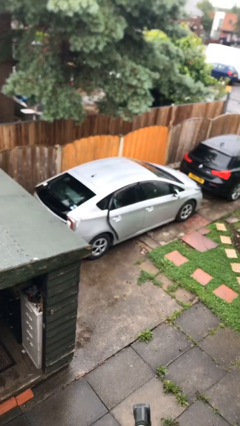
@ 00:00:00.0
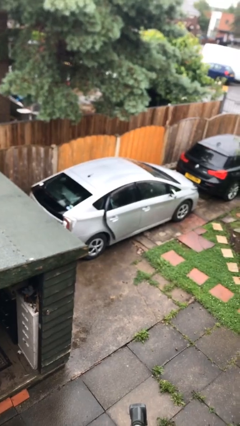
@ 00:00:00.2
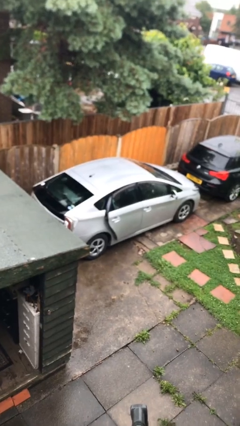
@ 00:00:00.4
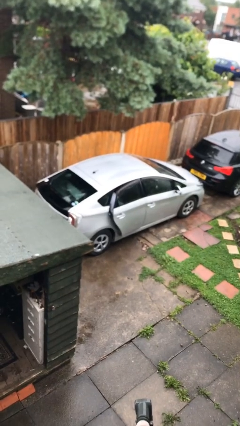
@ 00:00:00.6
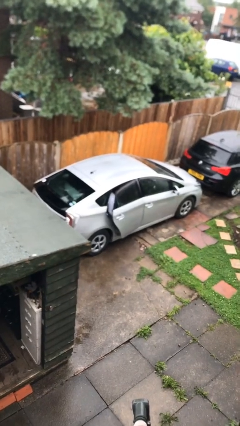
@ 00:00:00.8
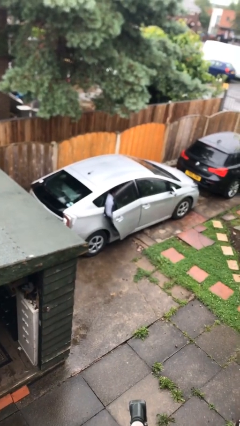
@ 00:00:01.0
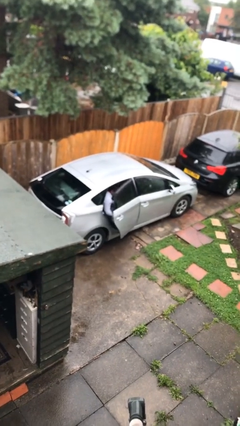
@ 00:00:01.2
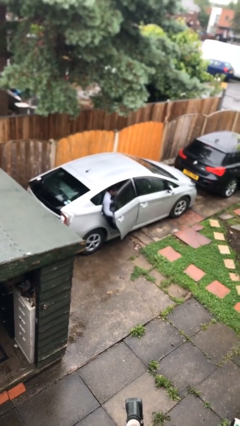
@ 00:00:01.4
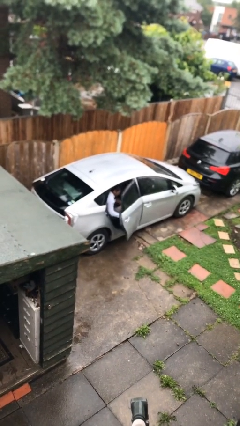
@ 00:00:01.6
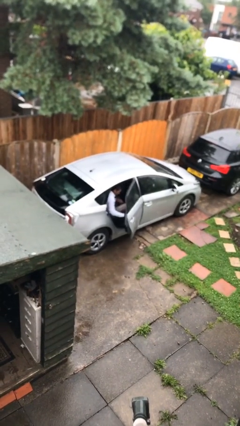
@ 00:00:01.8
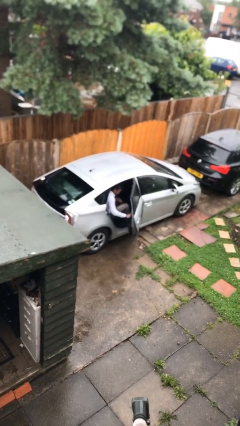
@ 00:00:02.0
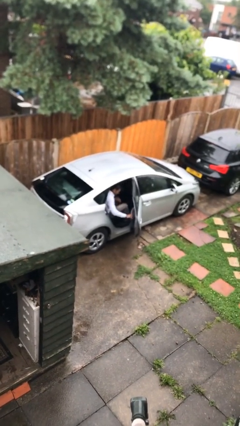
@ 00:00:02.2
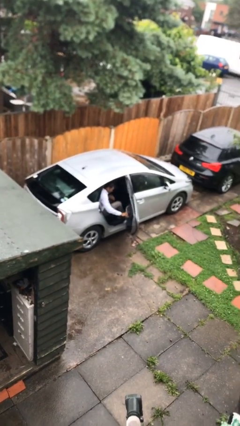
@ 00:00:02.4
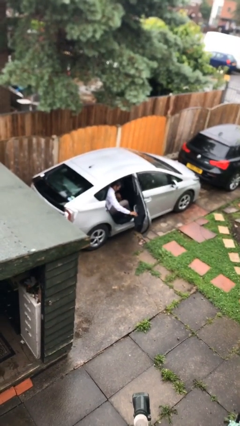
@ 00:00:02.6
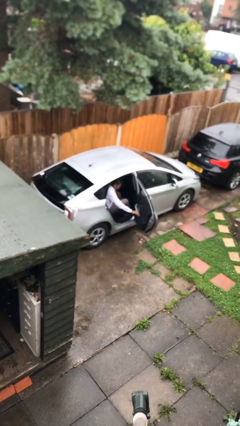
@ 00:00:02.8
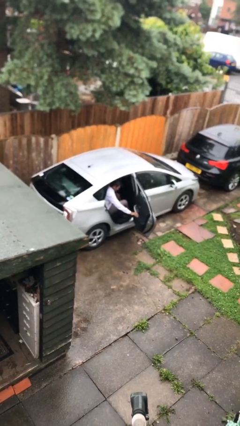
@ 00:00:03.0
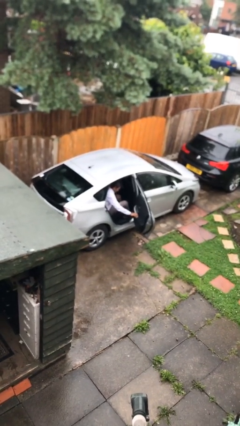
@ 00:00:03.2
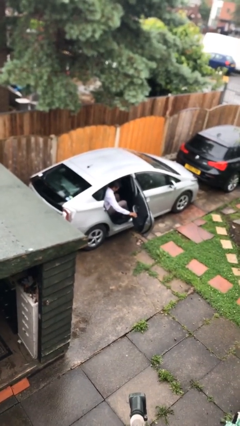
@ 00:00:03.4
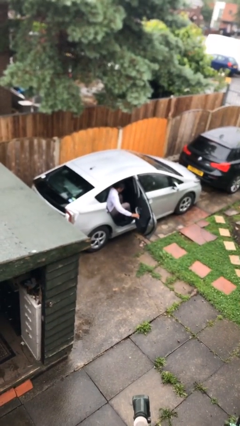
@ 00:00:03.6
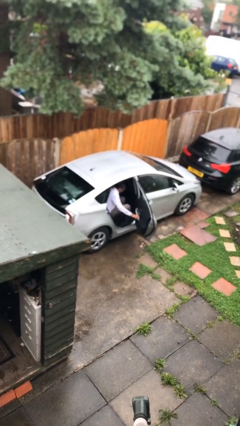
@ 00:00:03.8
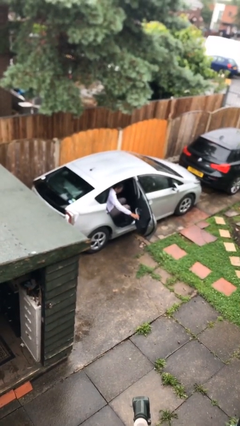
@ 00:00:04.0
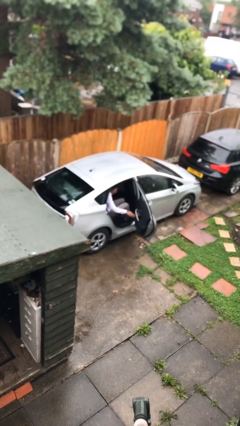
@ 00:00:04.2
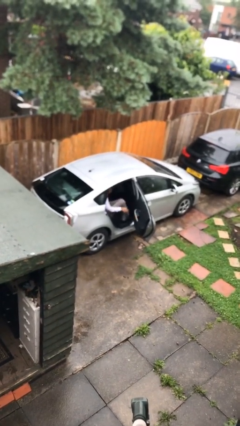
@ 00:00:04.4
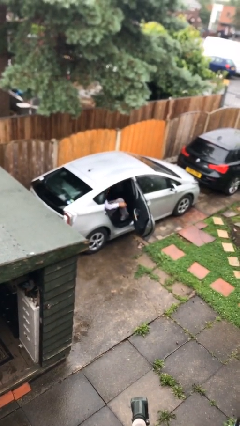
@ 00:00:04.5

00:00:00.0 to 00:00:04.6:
person opens car door

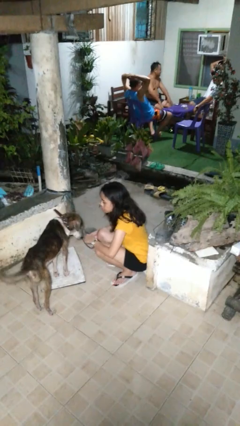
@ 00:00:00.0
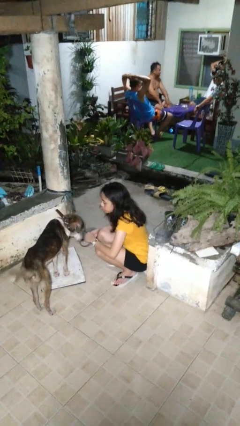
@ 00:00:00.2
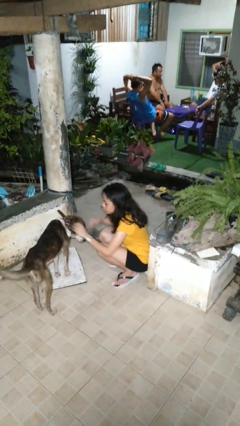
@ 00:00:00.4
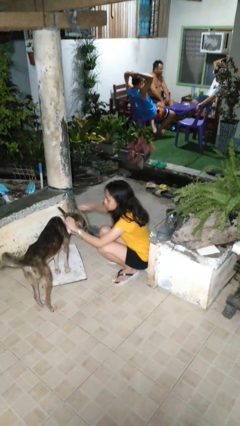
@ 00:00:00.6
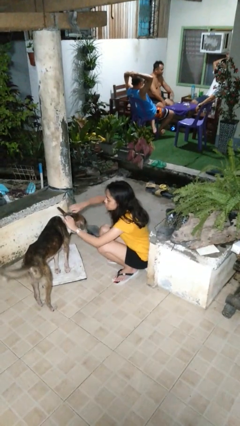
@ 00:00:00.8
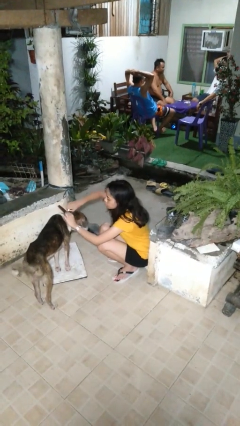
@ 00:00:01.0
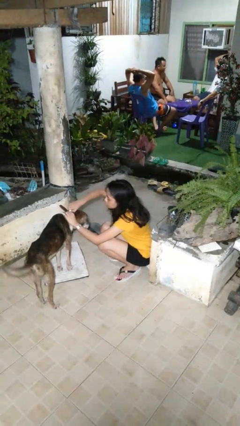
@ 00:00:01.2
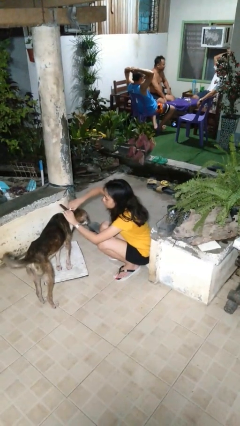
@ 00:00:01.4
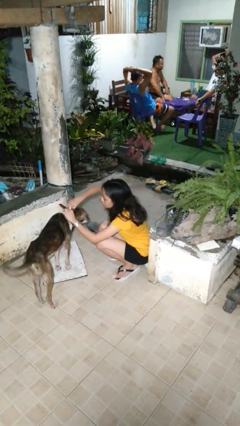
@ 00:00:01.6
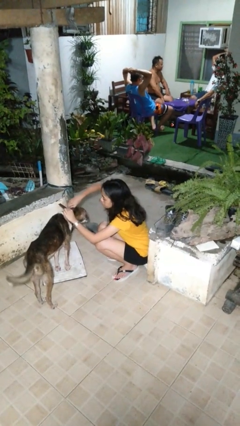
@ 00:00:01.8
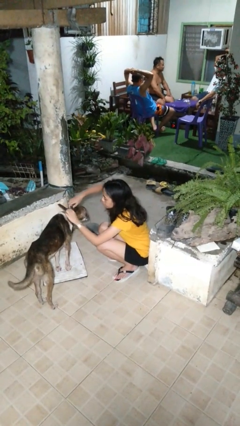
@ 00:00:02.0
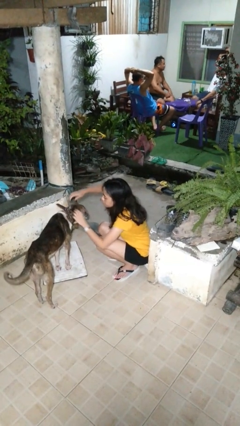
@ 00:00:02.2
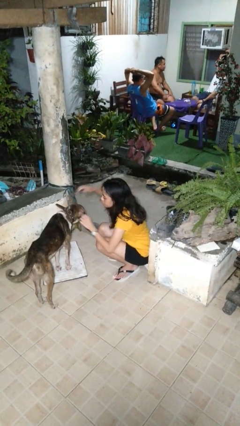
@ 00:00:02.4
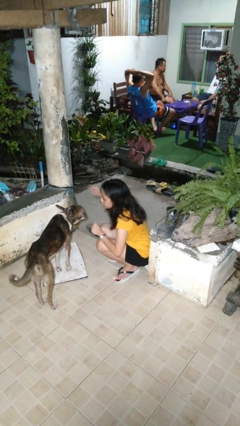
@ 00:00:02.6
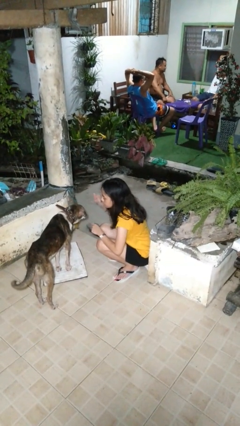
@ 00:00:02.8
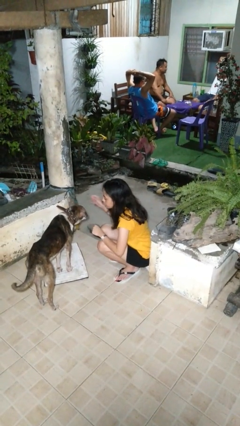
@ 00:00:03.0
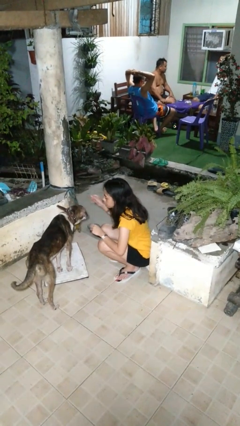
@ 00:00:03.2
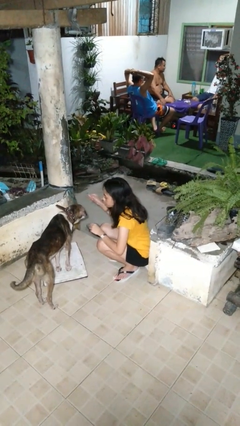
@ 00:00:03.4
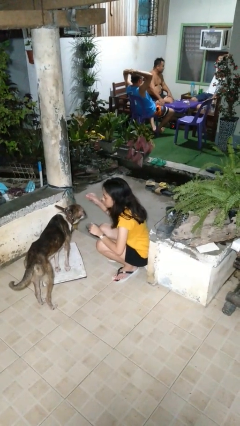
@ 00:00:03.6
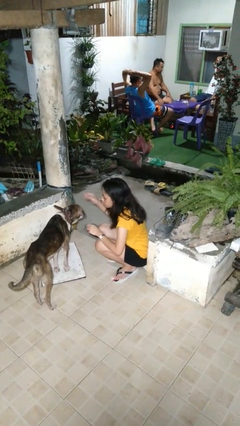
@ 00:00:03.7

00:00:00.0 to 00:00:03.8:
person attaches leash to dog

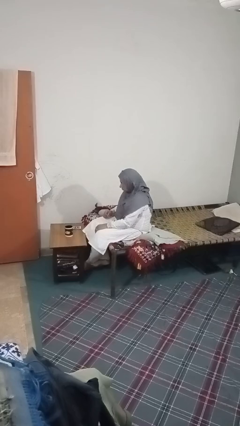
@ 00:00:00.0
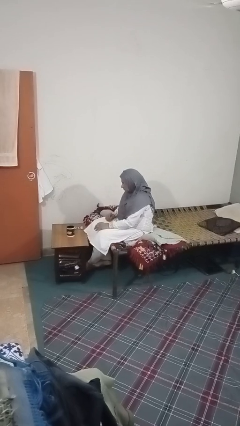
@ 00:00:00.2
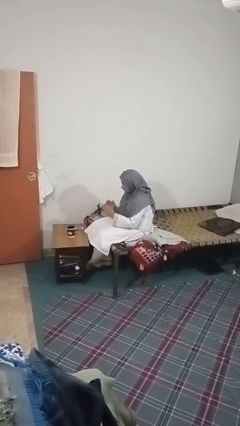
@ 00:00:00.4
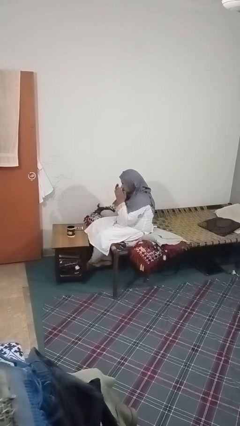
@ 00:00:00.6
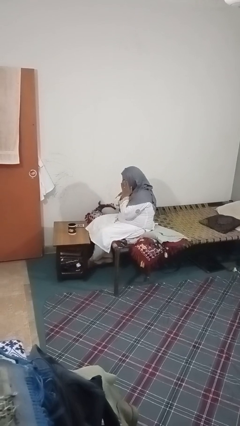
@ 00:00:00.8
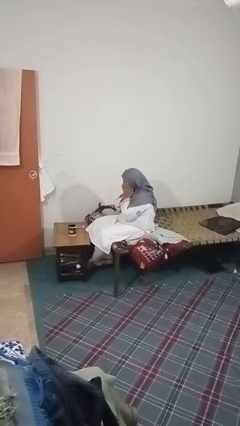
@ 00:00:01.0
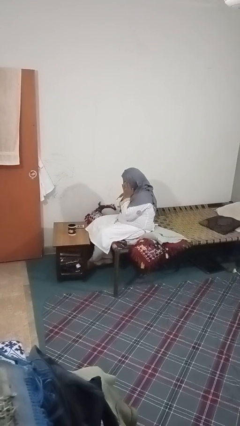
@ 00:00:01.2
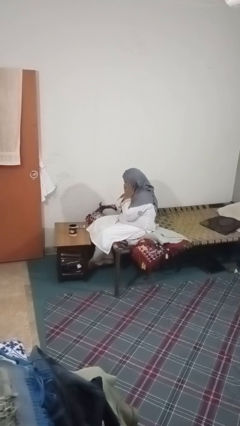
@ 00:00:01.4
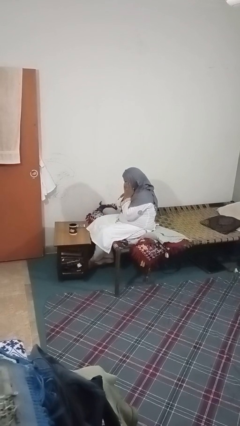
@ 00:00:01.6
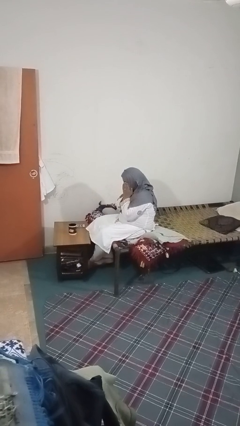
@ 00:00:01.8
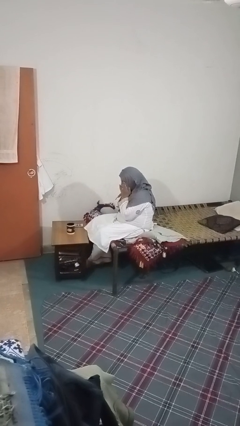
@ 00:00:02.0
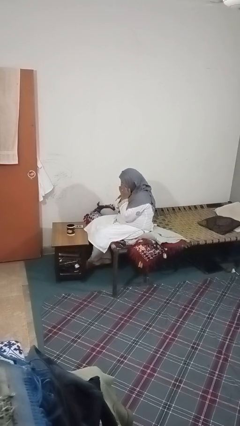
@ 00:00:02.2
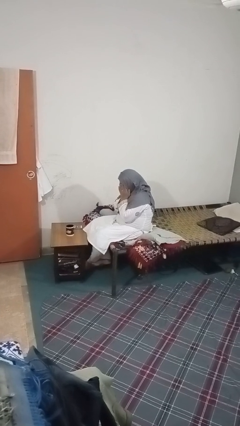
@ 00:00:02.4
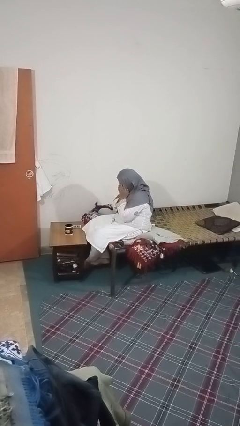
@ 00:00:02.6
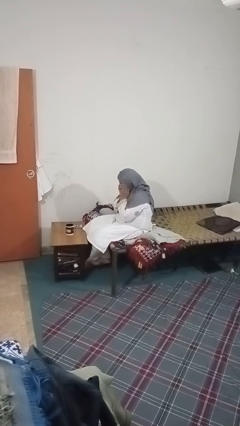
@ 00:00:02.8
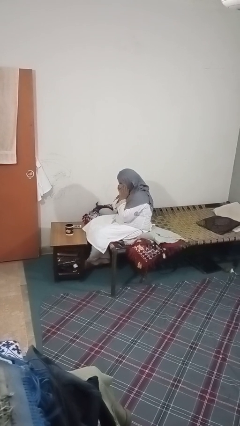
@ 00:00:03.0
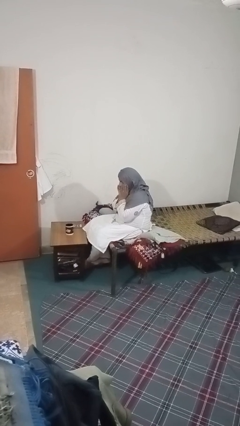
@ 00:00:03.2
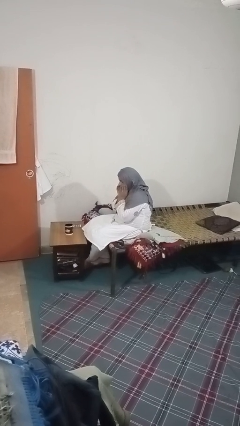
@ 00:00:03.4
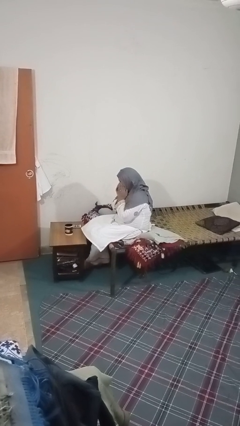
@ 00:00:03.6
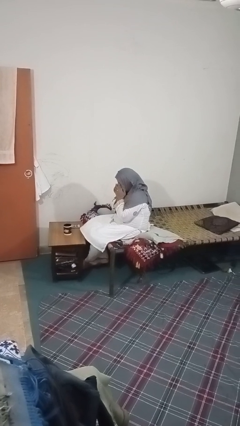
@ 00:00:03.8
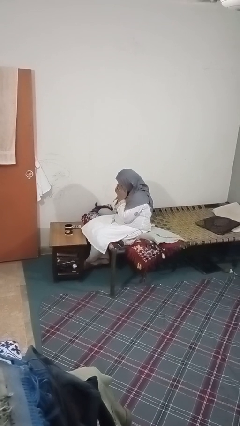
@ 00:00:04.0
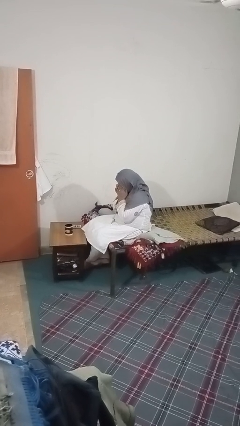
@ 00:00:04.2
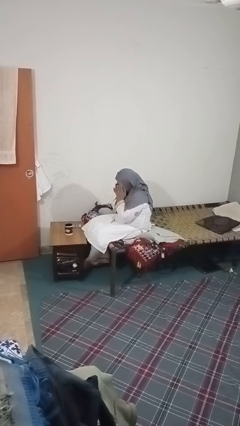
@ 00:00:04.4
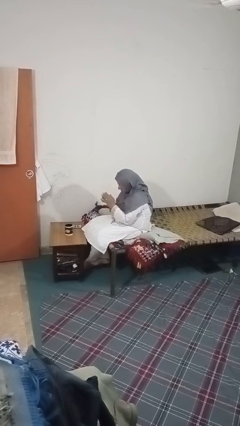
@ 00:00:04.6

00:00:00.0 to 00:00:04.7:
person rubs eyes

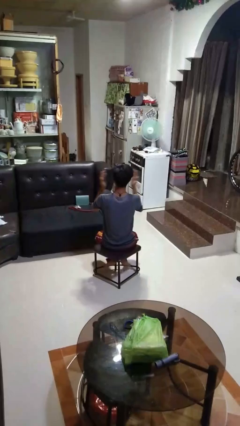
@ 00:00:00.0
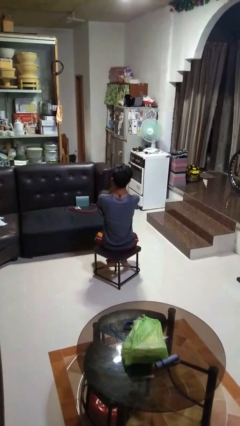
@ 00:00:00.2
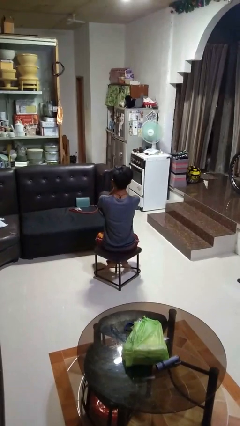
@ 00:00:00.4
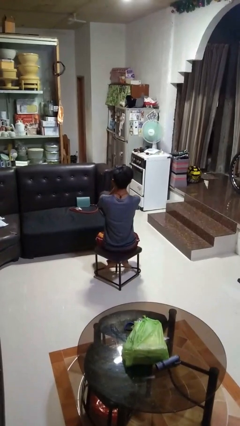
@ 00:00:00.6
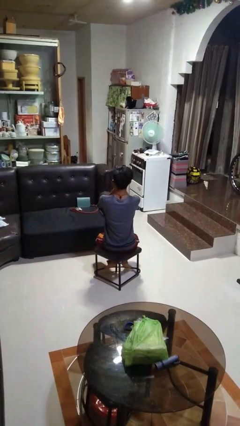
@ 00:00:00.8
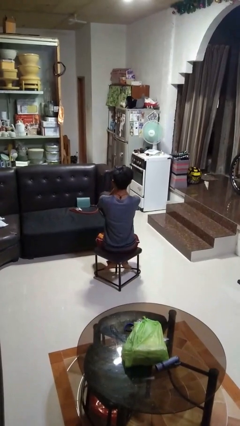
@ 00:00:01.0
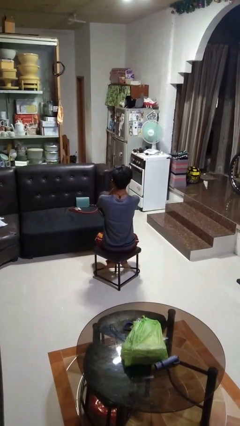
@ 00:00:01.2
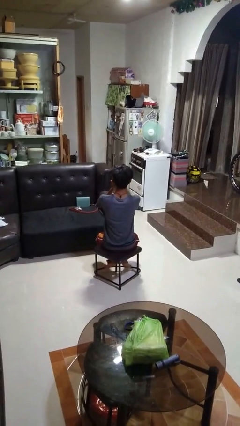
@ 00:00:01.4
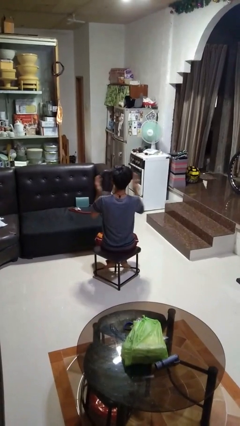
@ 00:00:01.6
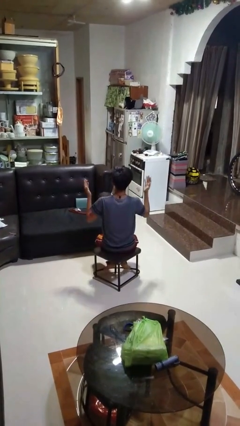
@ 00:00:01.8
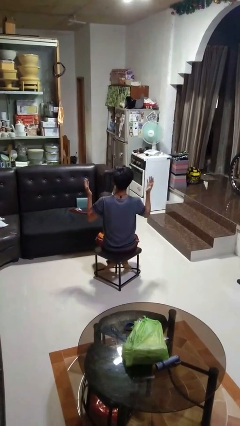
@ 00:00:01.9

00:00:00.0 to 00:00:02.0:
person covers face with hands

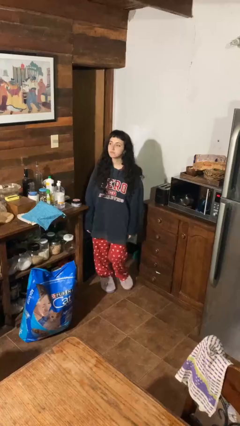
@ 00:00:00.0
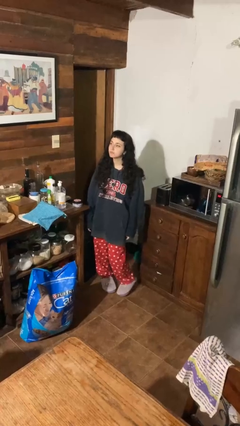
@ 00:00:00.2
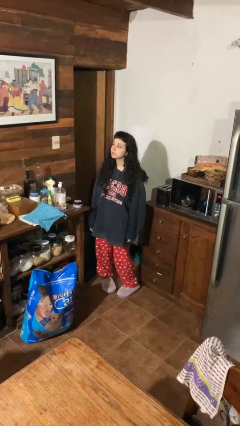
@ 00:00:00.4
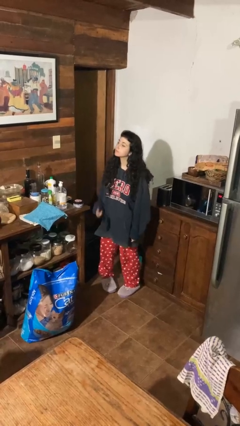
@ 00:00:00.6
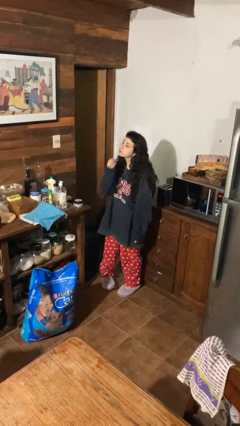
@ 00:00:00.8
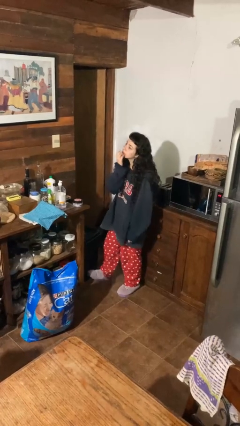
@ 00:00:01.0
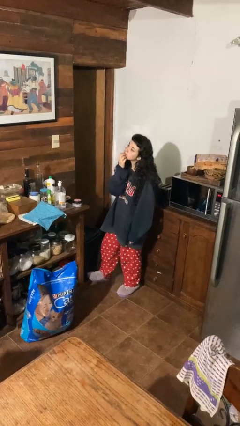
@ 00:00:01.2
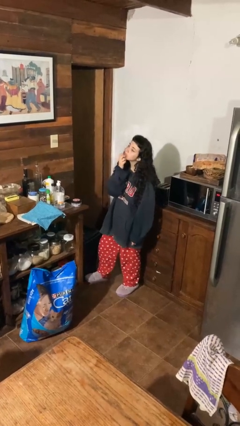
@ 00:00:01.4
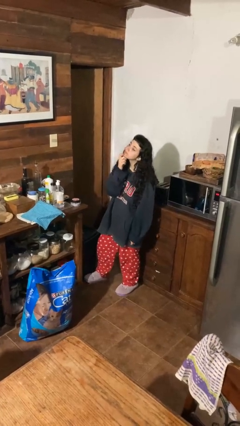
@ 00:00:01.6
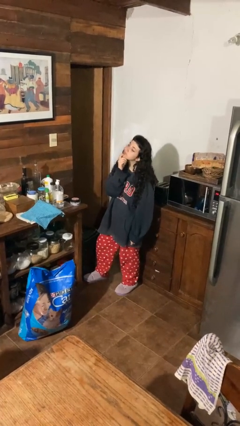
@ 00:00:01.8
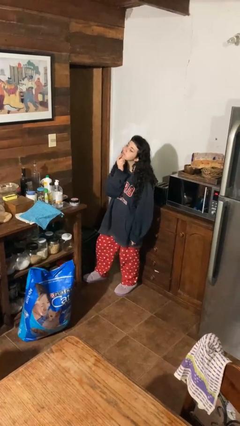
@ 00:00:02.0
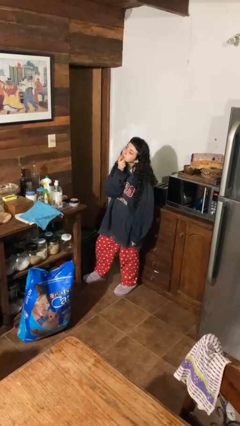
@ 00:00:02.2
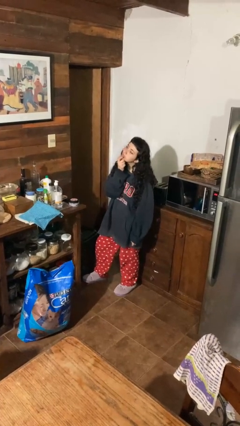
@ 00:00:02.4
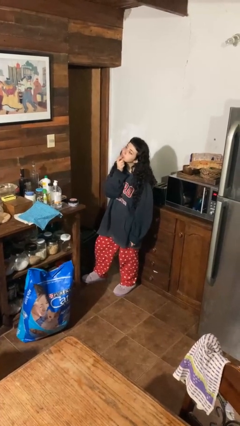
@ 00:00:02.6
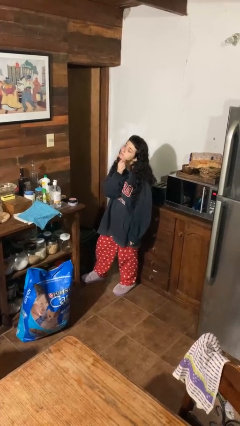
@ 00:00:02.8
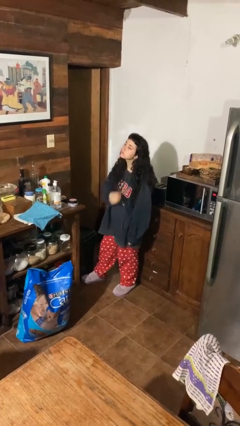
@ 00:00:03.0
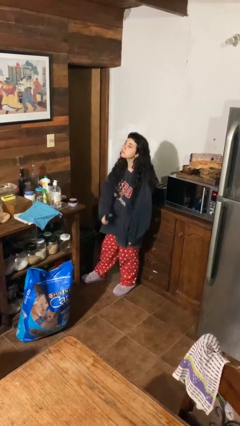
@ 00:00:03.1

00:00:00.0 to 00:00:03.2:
person strokes chin
